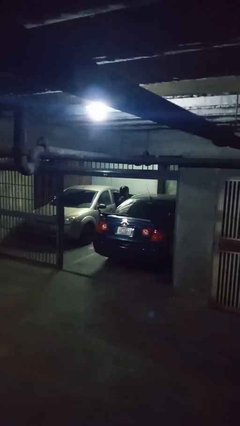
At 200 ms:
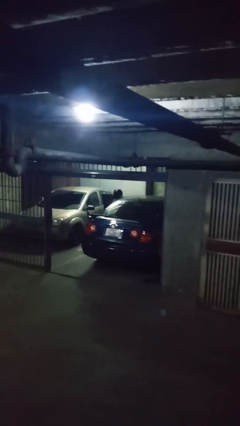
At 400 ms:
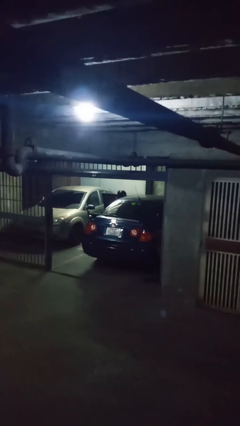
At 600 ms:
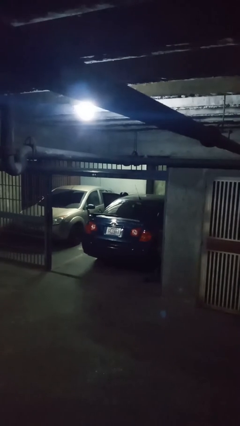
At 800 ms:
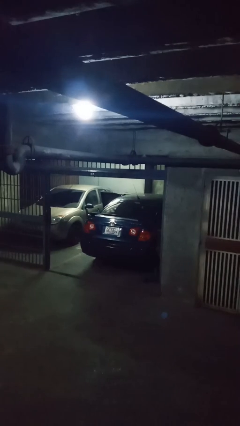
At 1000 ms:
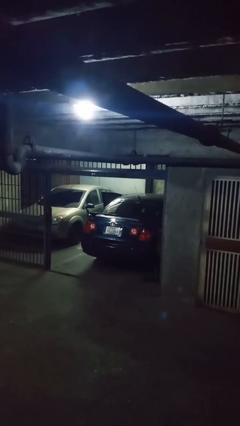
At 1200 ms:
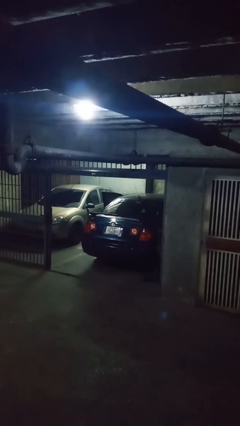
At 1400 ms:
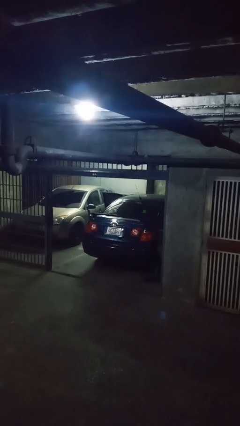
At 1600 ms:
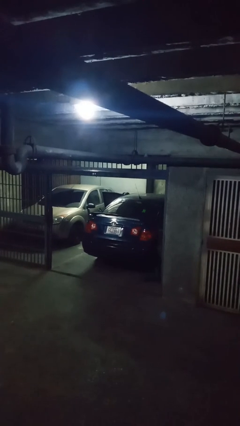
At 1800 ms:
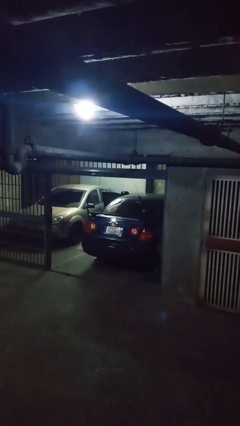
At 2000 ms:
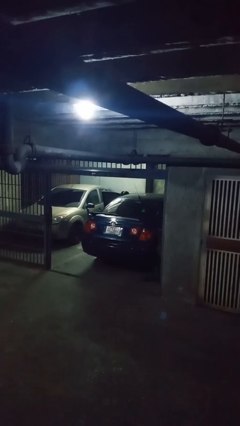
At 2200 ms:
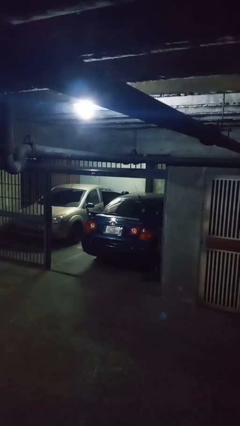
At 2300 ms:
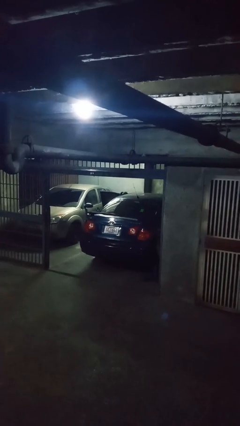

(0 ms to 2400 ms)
person loads car

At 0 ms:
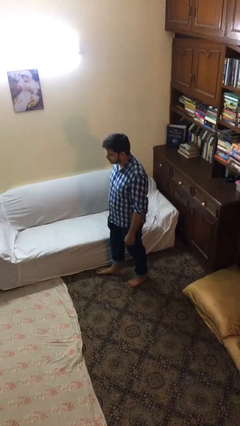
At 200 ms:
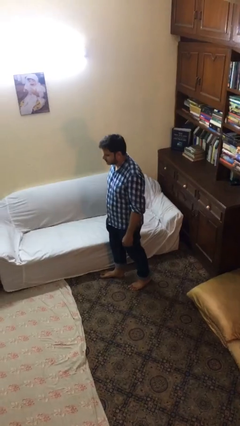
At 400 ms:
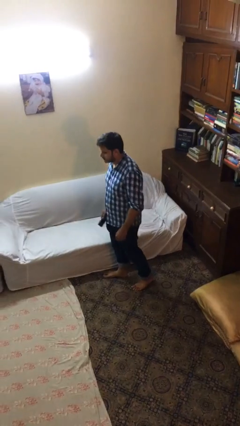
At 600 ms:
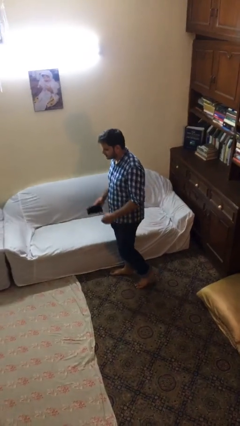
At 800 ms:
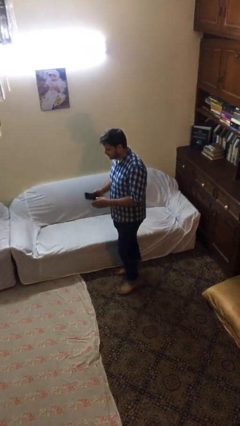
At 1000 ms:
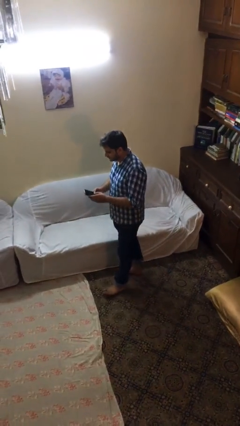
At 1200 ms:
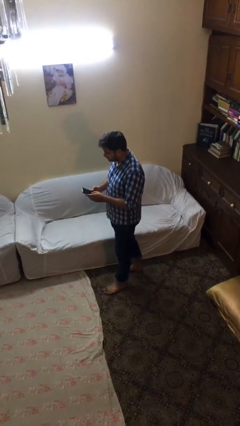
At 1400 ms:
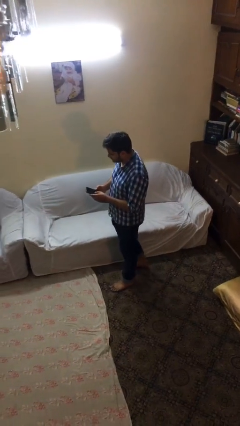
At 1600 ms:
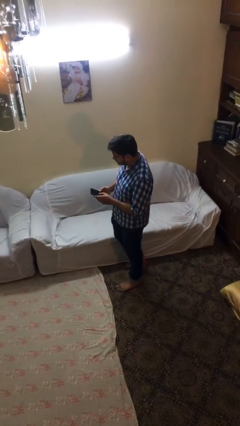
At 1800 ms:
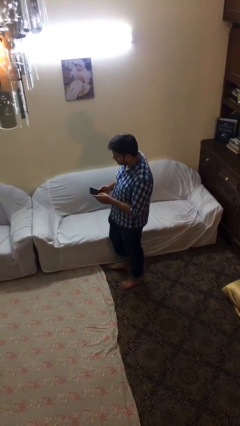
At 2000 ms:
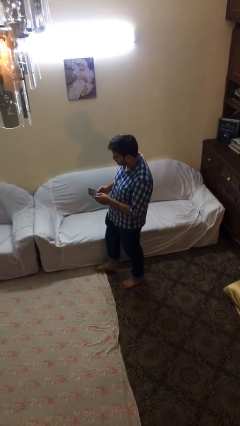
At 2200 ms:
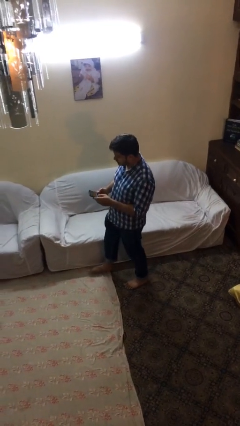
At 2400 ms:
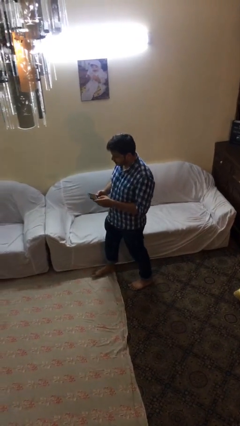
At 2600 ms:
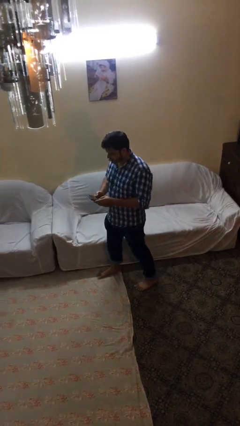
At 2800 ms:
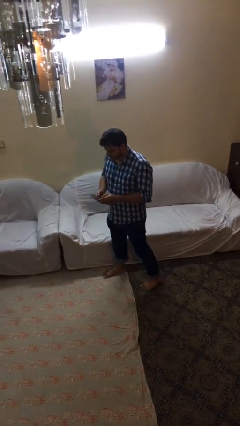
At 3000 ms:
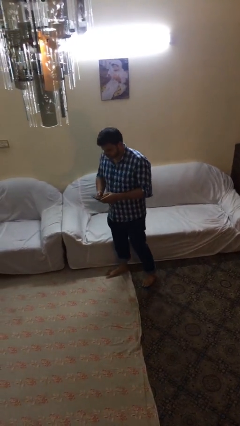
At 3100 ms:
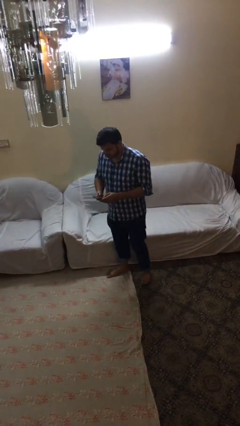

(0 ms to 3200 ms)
person talks on phone

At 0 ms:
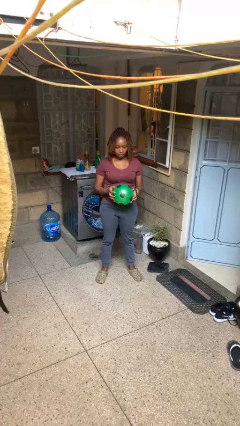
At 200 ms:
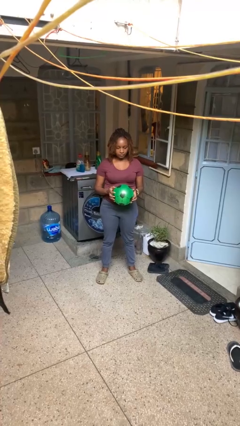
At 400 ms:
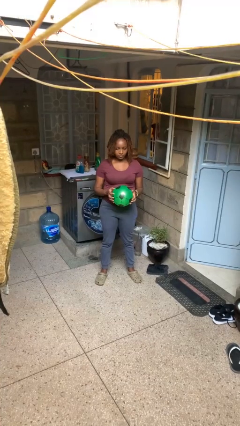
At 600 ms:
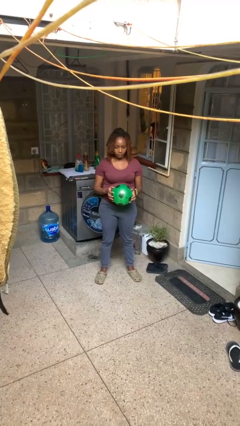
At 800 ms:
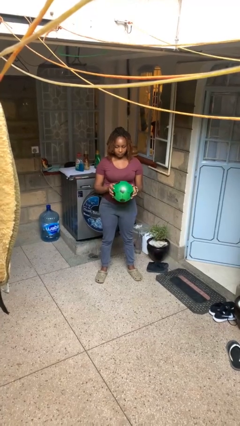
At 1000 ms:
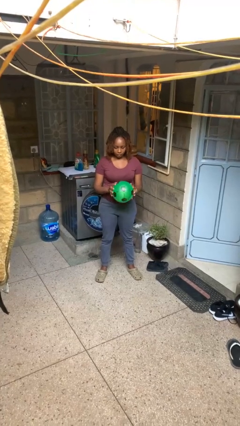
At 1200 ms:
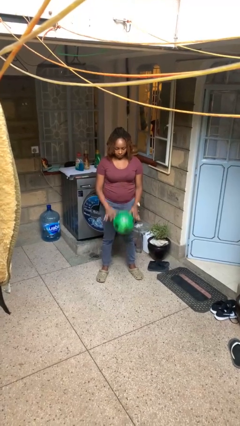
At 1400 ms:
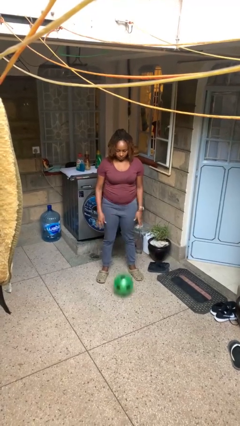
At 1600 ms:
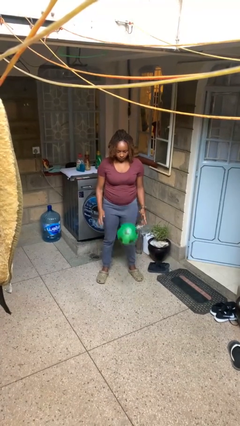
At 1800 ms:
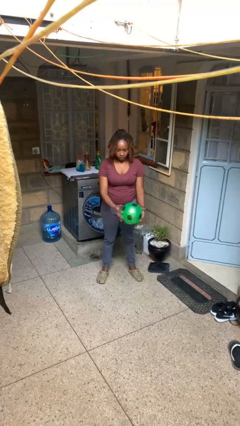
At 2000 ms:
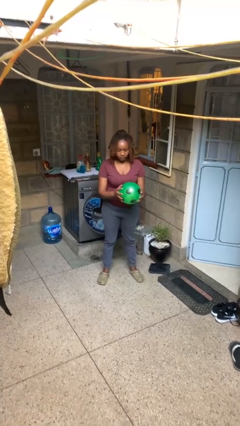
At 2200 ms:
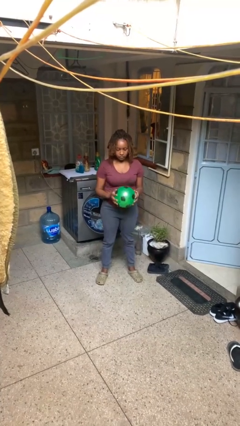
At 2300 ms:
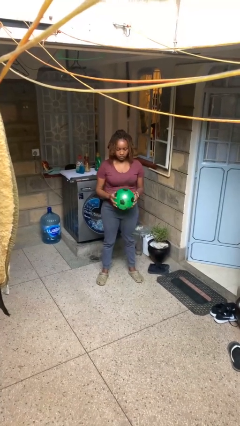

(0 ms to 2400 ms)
person bounces ball on floor

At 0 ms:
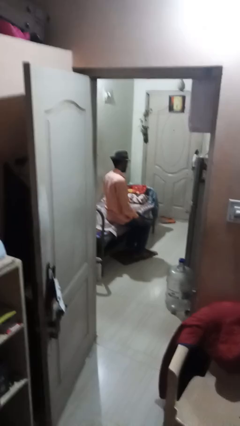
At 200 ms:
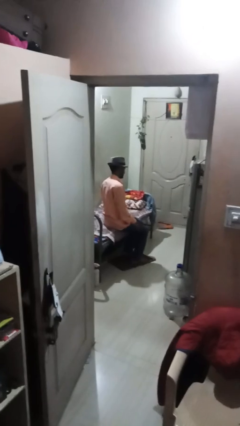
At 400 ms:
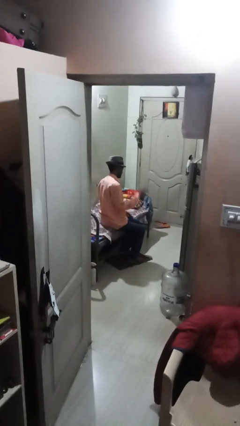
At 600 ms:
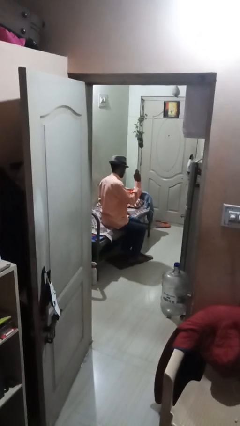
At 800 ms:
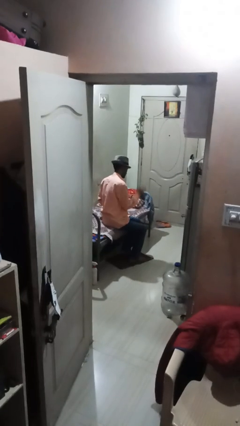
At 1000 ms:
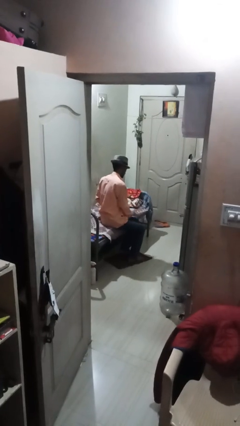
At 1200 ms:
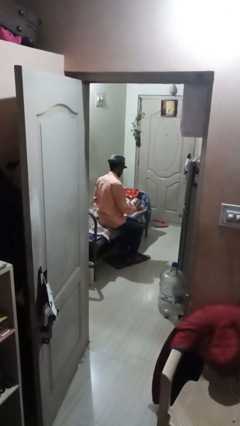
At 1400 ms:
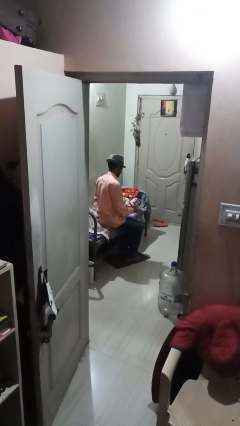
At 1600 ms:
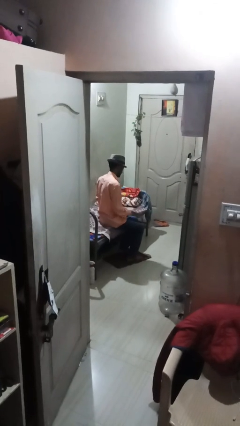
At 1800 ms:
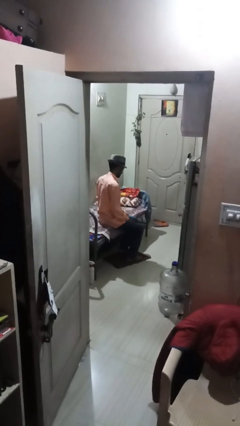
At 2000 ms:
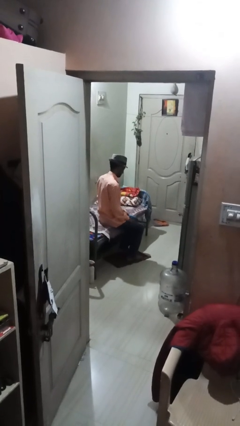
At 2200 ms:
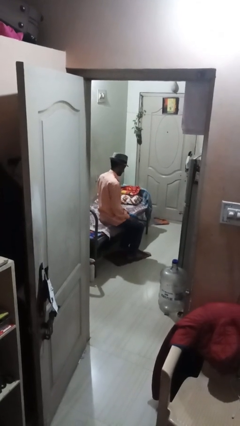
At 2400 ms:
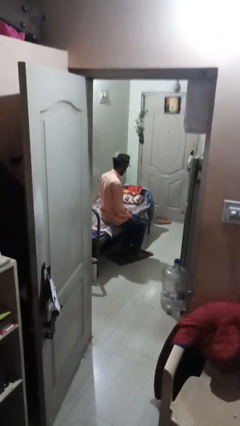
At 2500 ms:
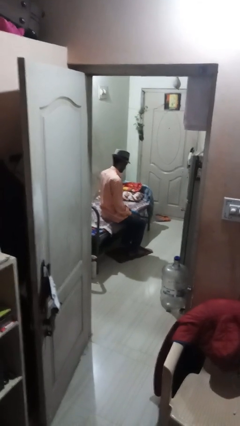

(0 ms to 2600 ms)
person swats bug

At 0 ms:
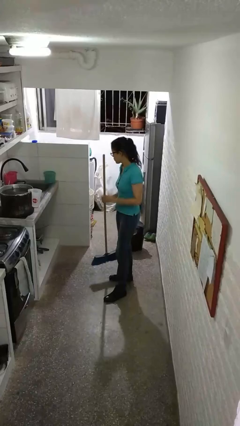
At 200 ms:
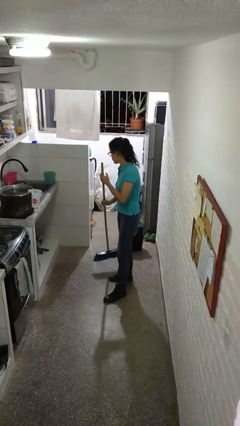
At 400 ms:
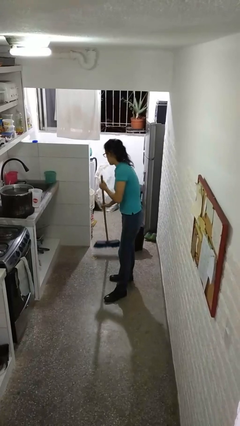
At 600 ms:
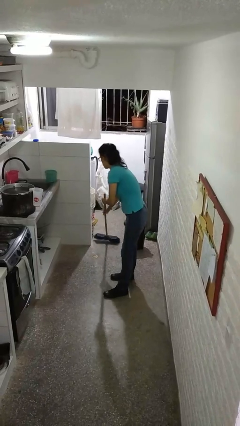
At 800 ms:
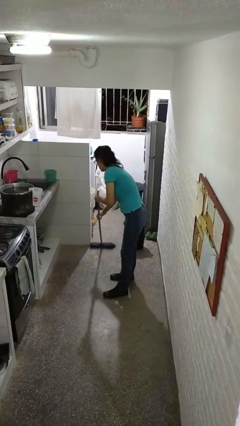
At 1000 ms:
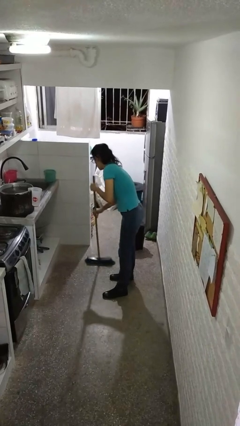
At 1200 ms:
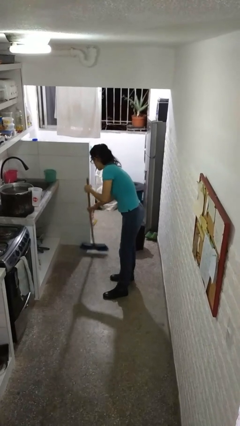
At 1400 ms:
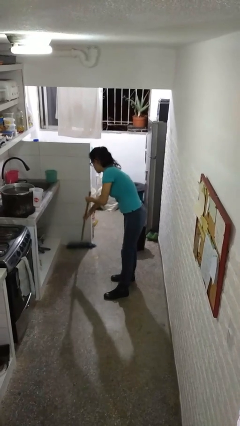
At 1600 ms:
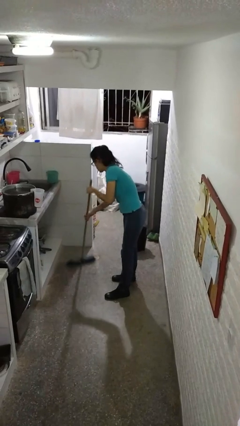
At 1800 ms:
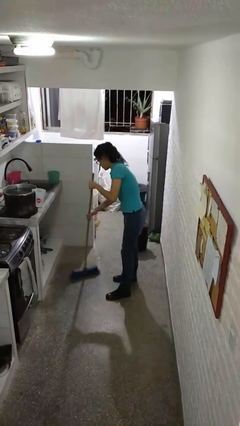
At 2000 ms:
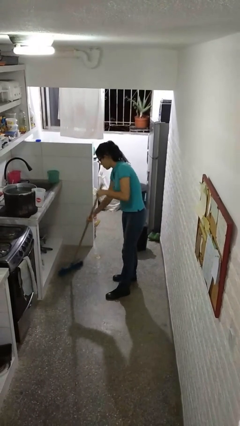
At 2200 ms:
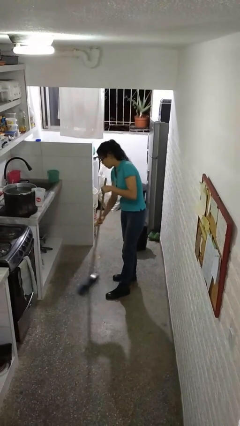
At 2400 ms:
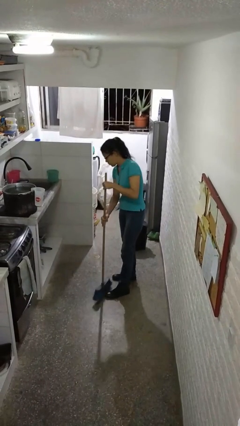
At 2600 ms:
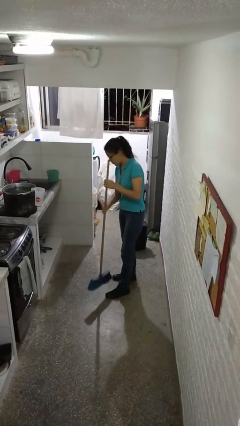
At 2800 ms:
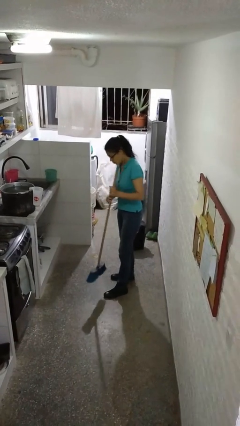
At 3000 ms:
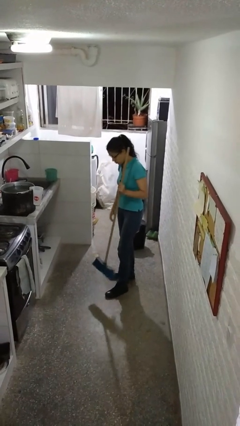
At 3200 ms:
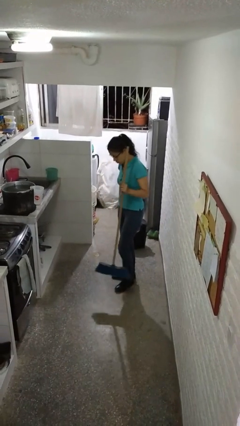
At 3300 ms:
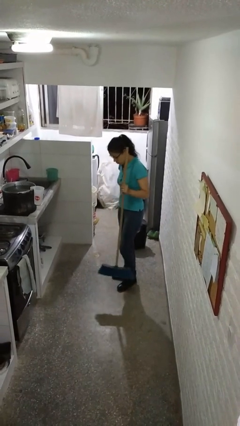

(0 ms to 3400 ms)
person sweeps floor

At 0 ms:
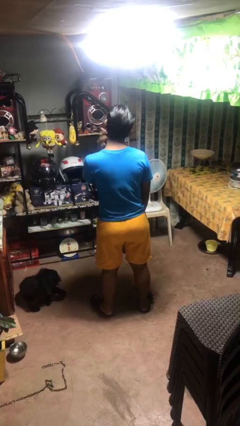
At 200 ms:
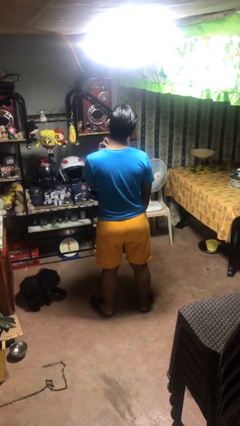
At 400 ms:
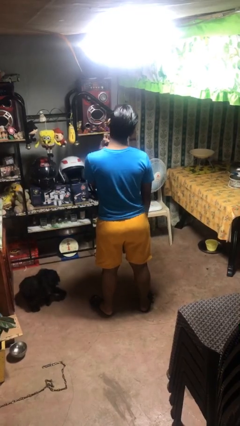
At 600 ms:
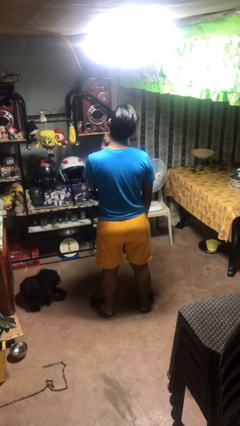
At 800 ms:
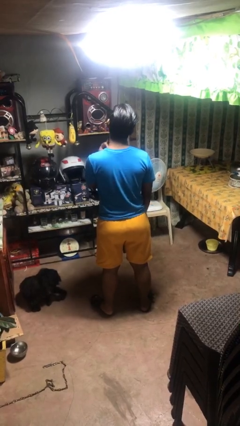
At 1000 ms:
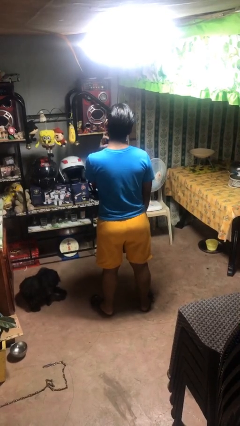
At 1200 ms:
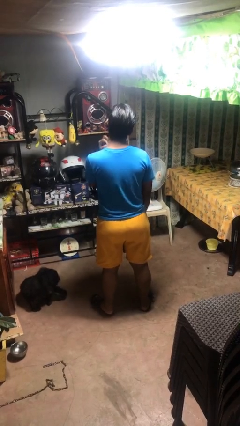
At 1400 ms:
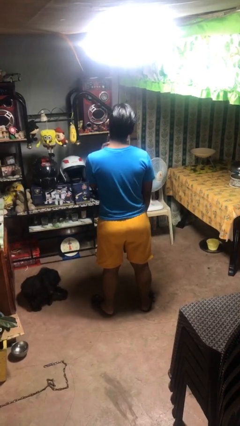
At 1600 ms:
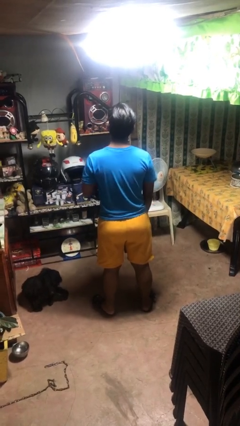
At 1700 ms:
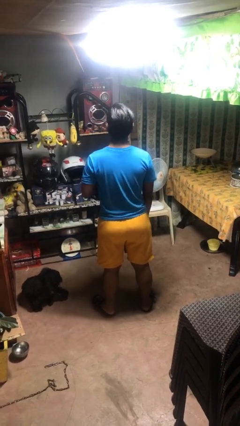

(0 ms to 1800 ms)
person scratches face

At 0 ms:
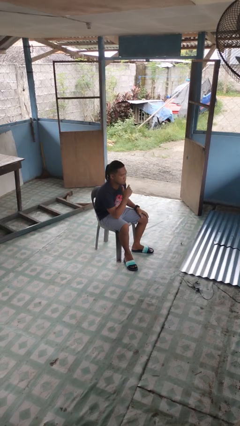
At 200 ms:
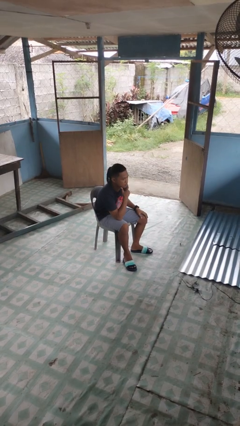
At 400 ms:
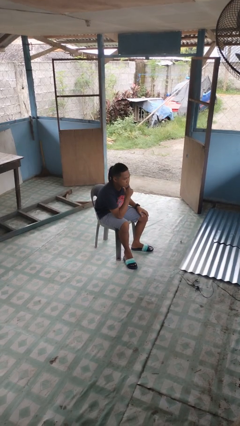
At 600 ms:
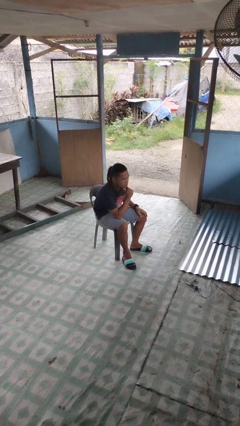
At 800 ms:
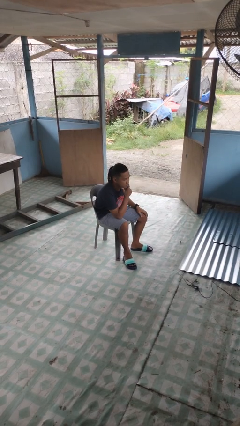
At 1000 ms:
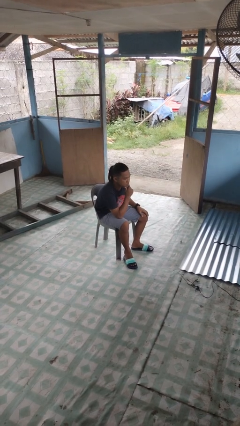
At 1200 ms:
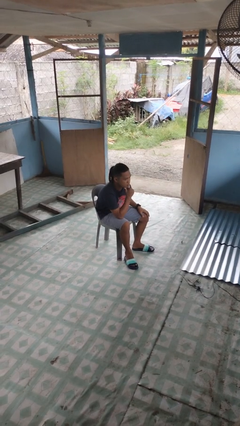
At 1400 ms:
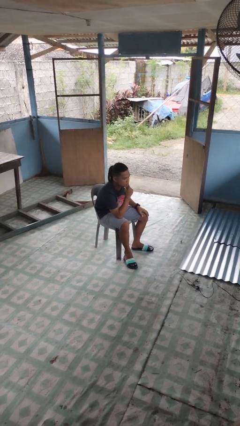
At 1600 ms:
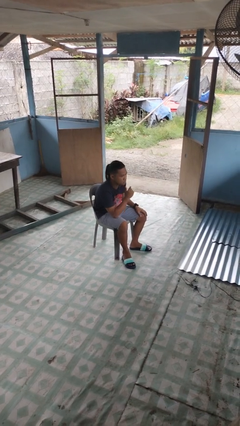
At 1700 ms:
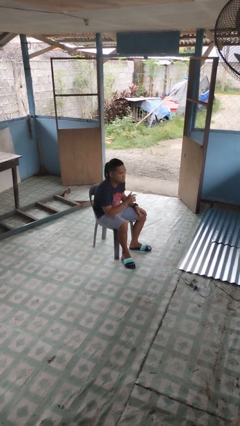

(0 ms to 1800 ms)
person strokes chin
